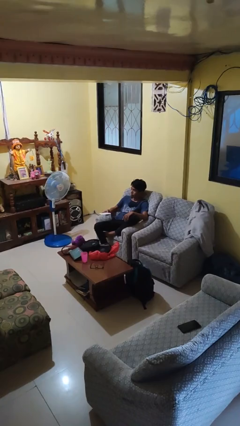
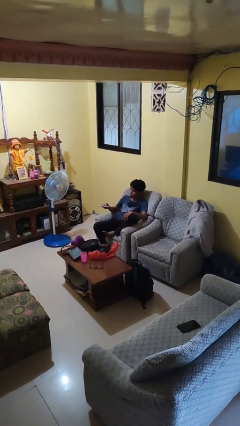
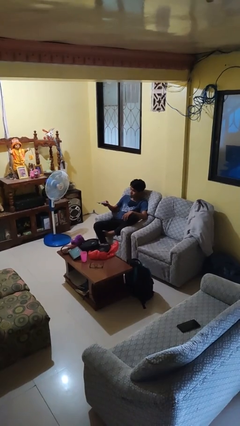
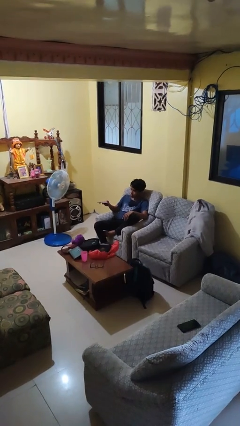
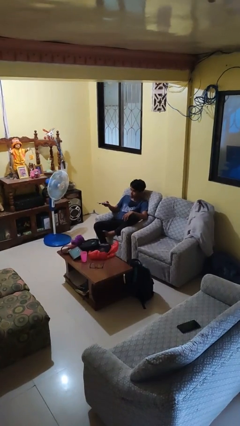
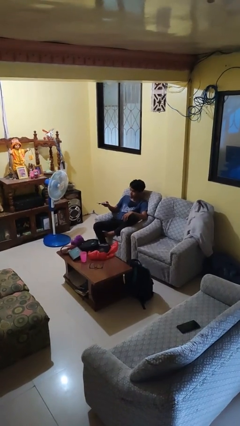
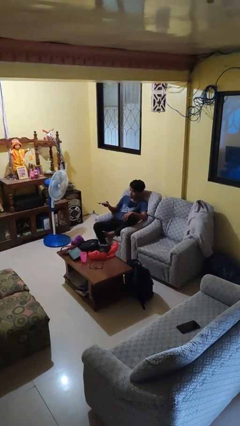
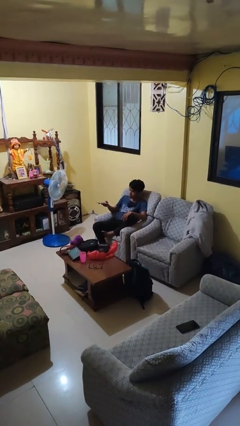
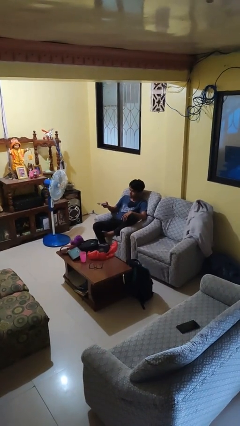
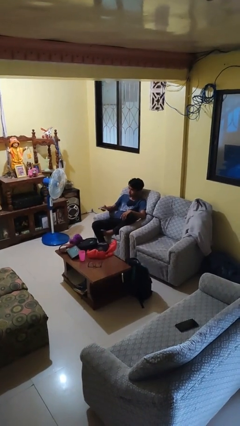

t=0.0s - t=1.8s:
person uses television remote

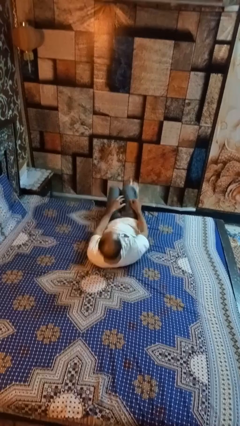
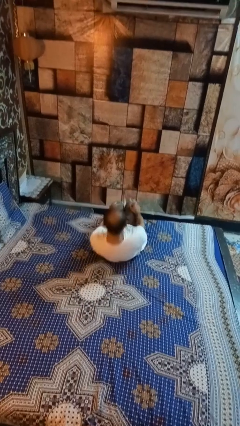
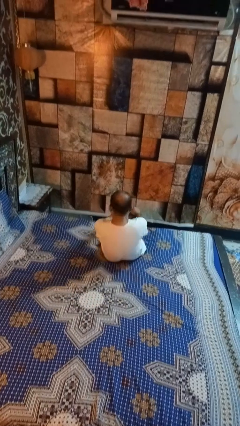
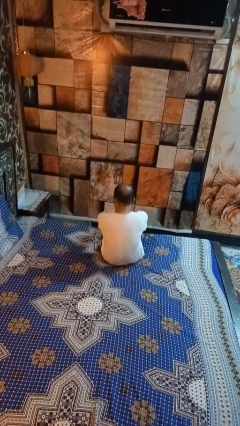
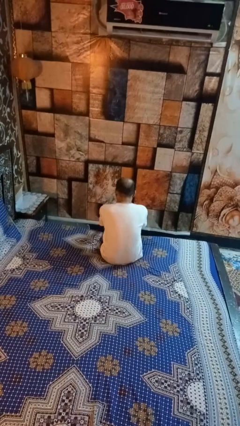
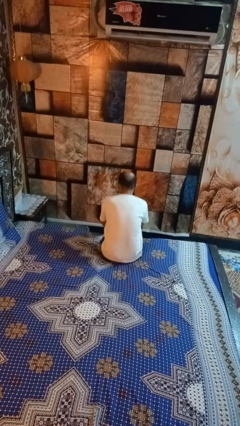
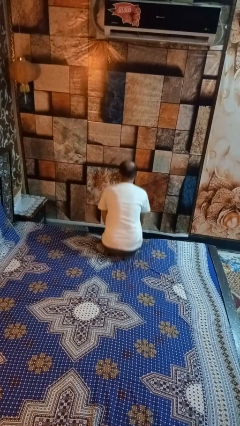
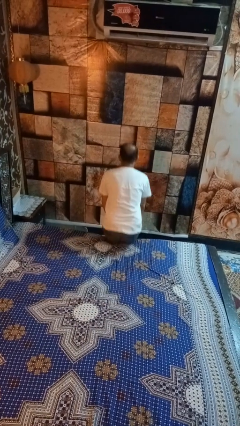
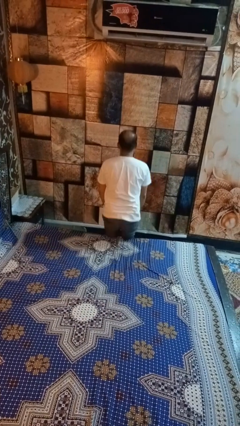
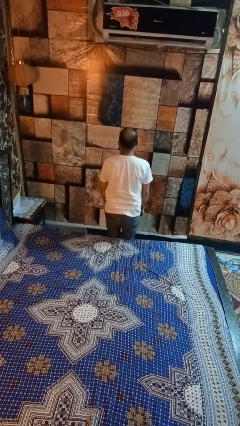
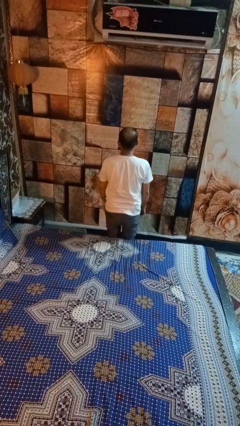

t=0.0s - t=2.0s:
person stands up

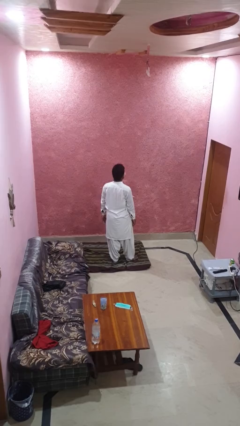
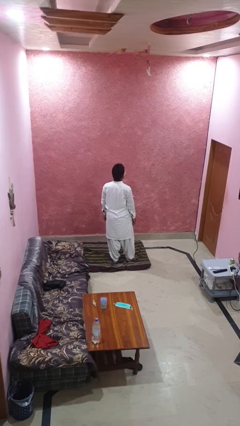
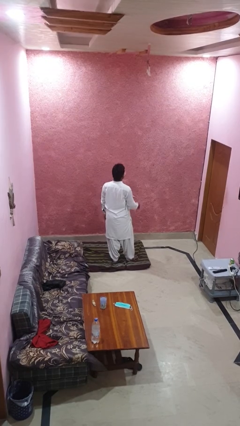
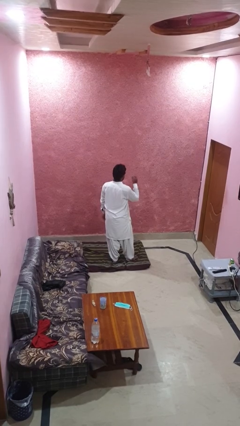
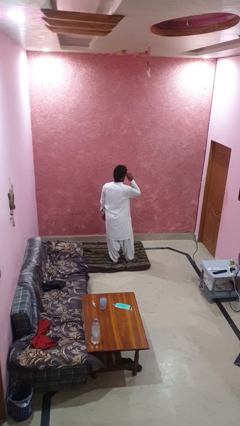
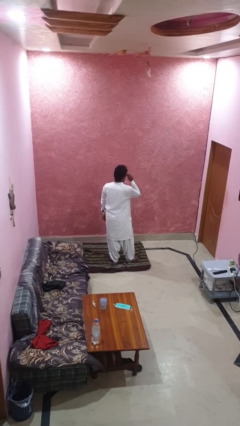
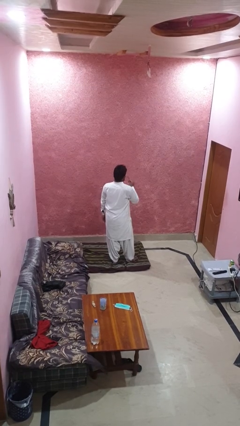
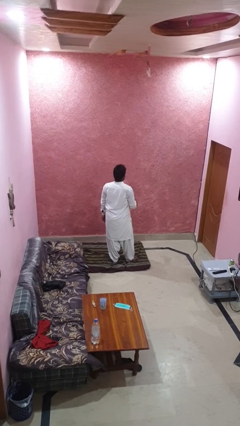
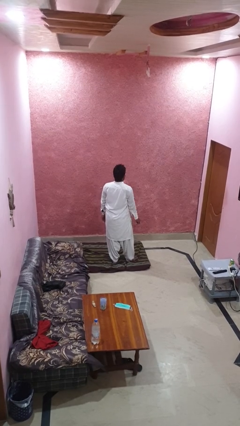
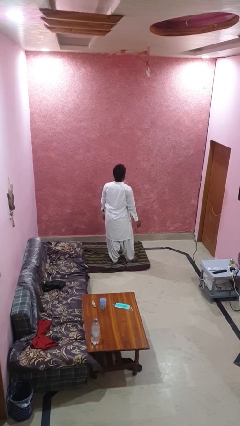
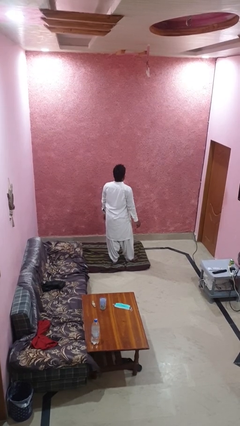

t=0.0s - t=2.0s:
person takes off glasses

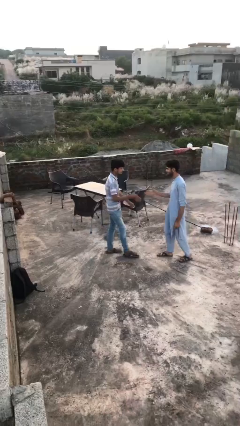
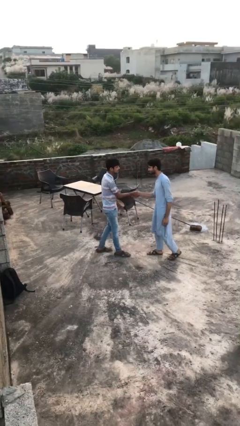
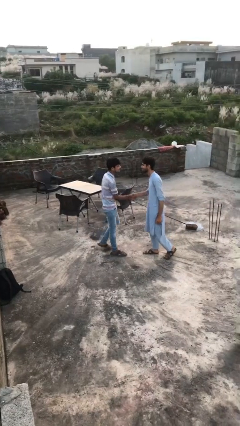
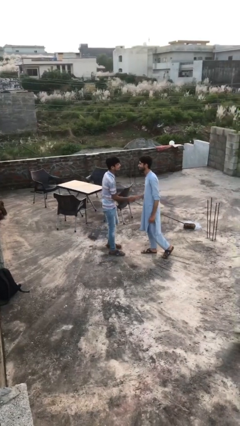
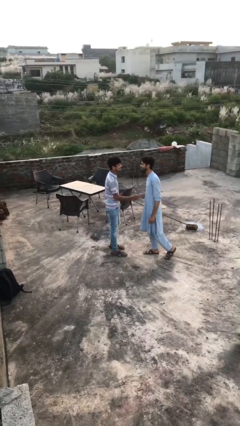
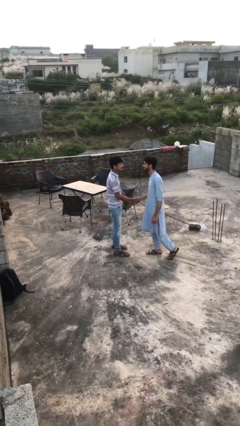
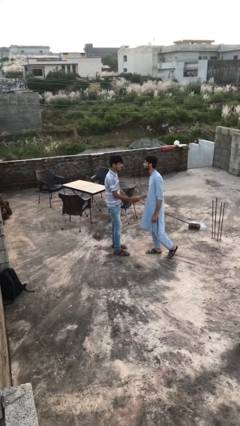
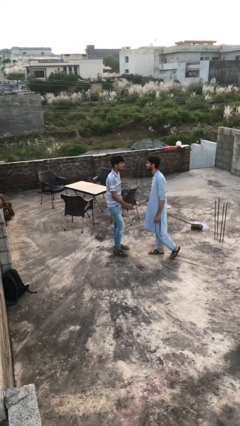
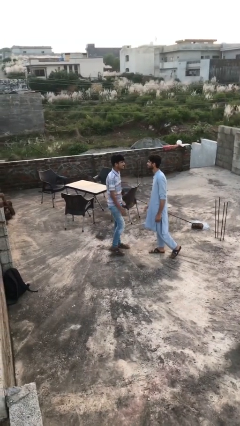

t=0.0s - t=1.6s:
person shakes hand

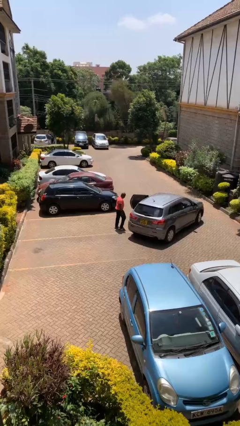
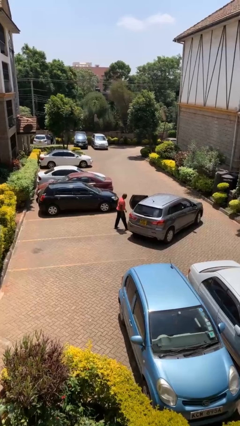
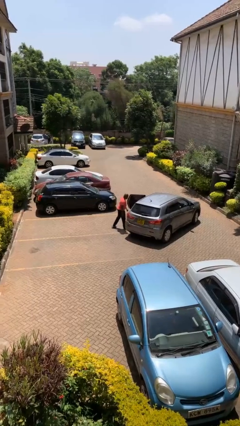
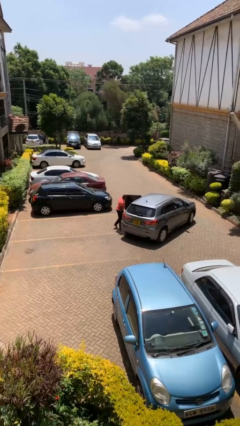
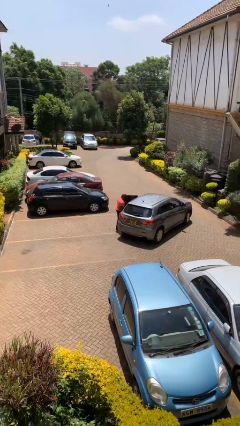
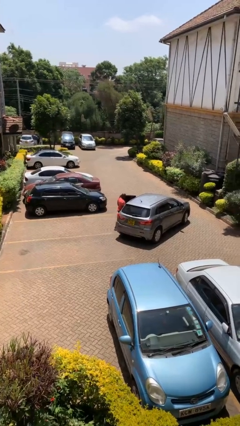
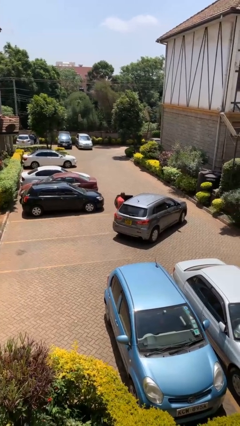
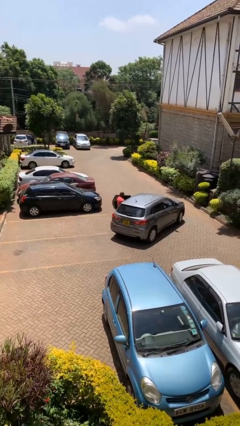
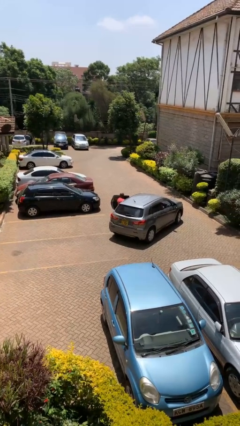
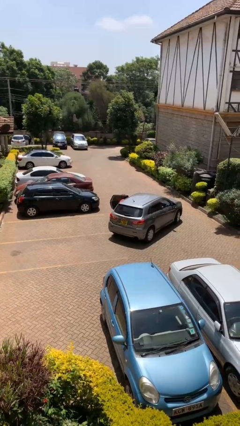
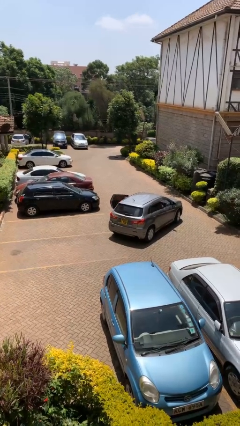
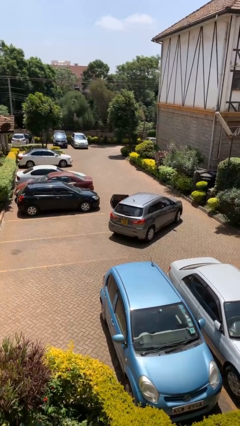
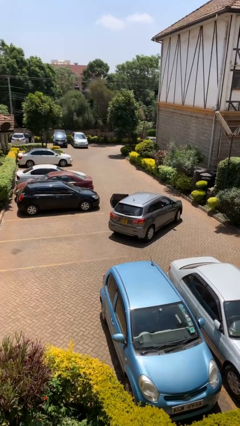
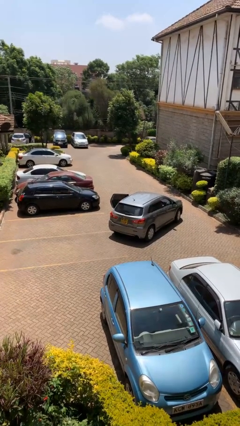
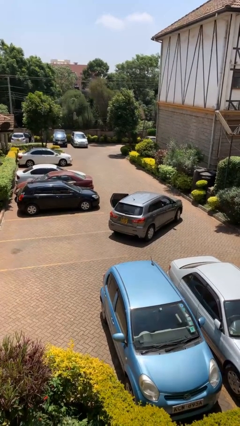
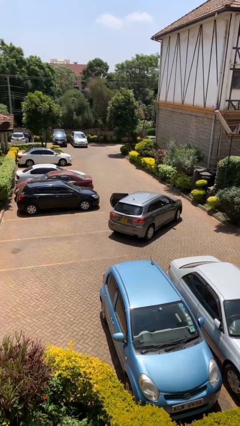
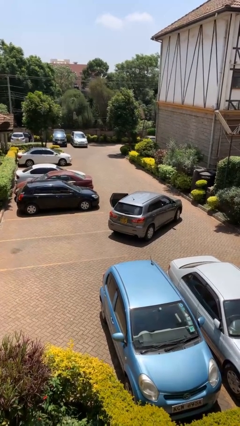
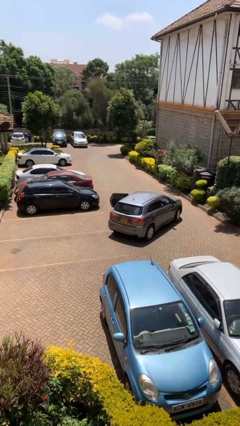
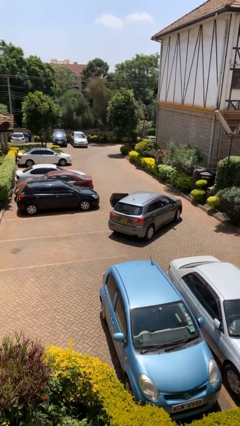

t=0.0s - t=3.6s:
person enters car

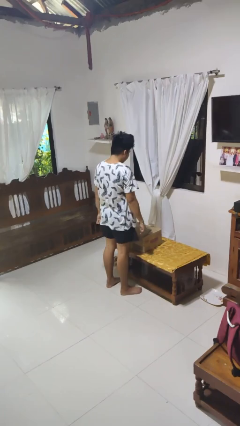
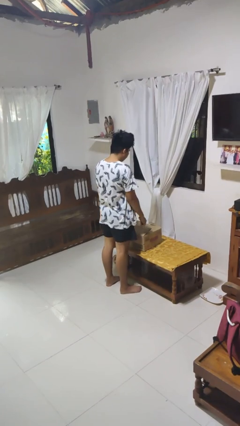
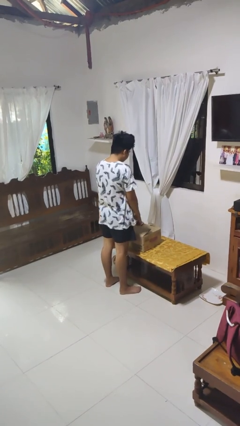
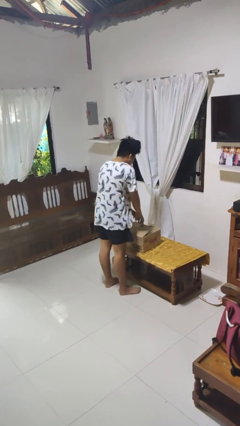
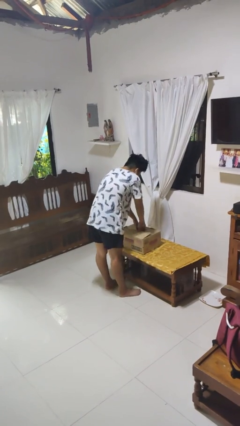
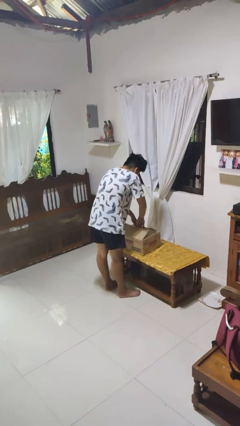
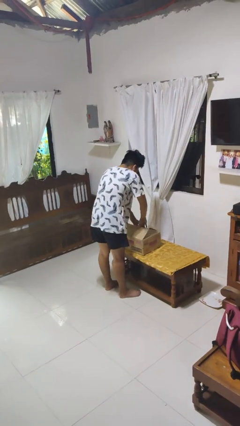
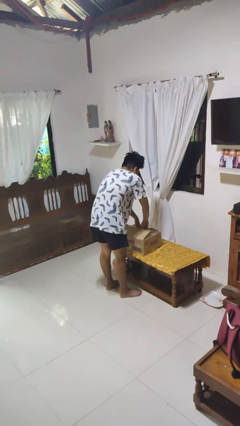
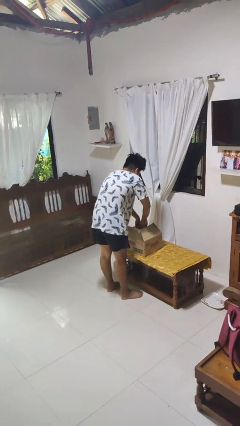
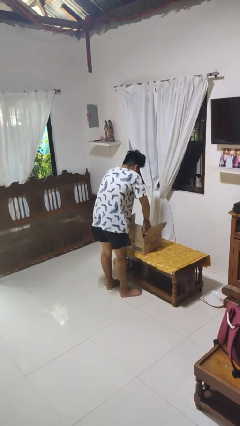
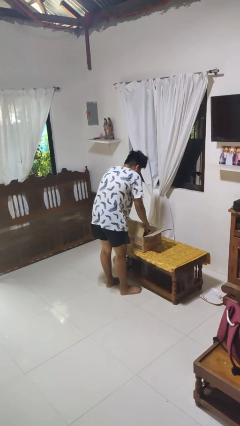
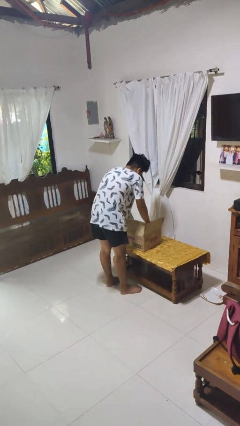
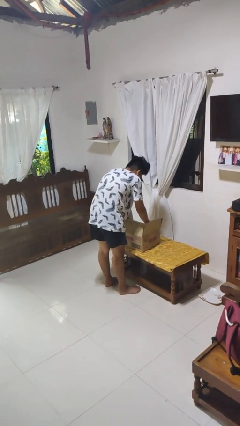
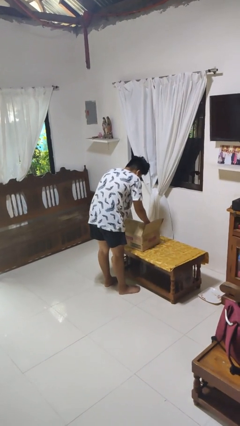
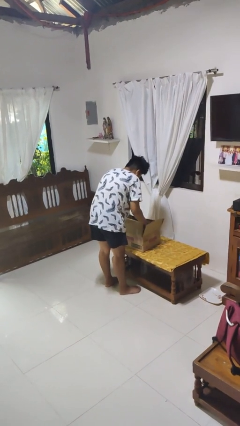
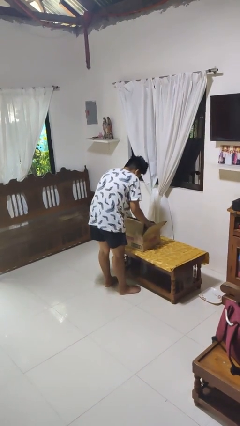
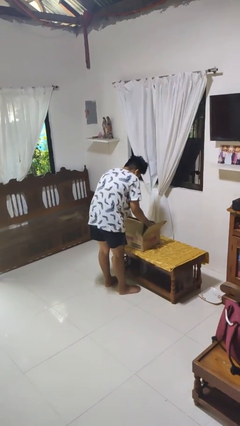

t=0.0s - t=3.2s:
person searches in box

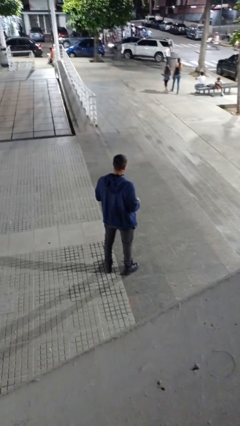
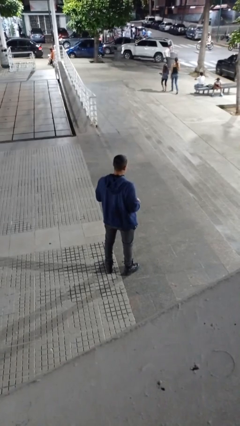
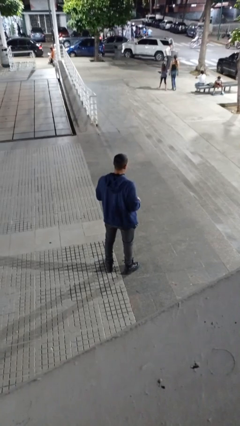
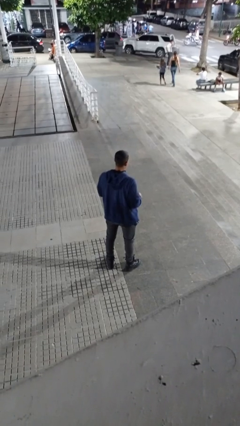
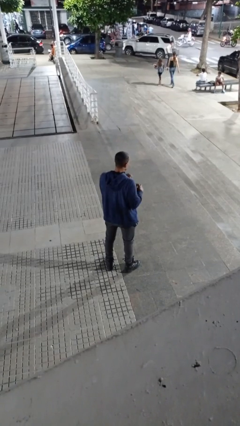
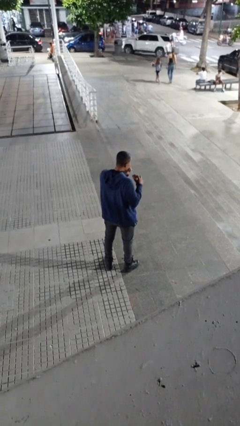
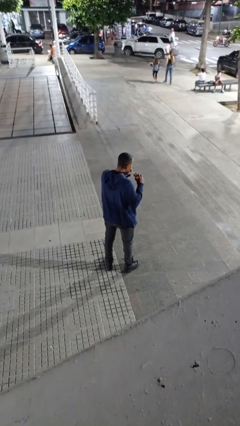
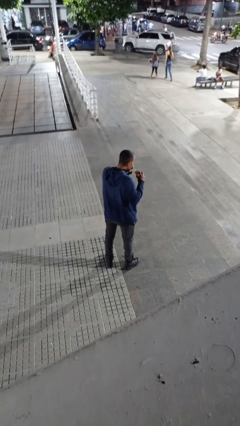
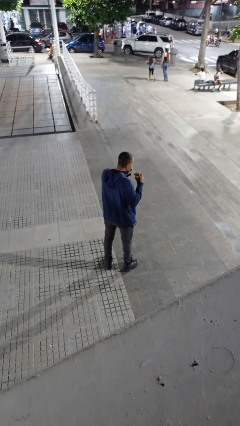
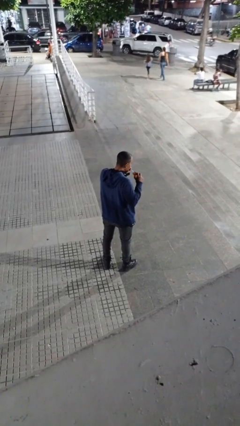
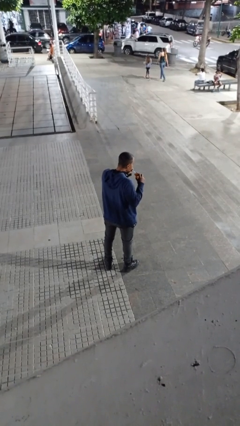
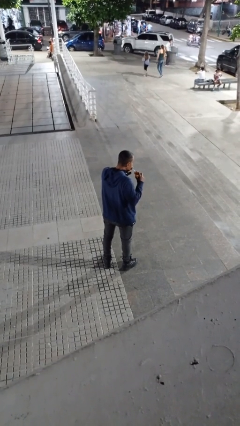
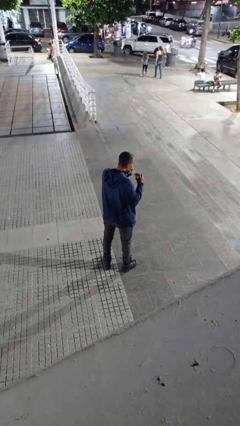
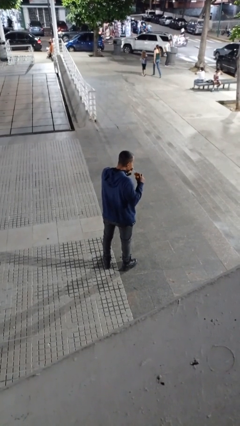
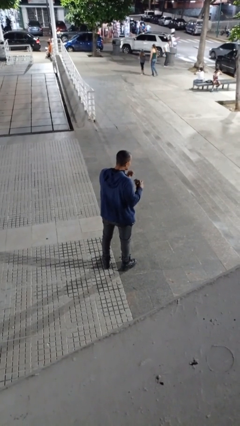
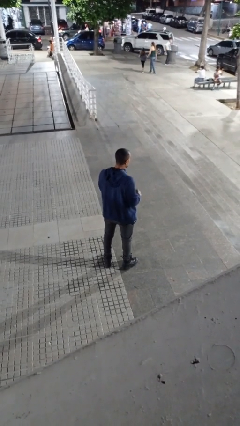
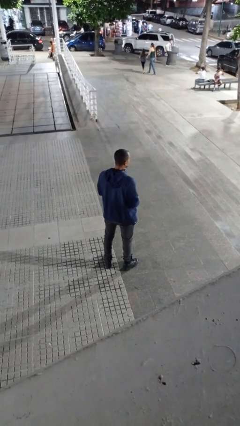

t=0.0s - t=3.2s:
person drinks from straw
